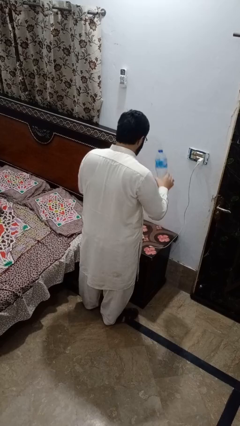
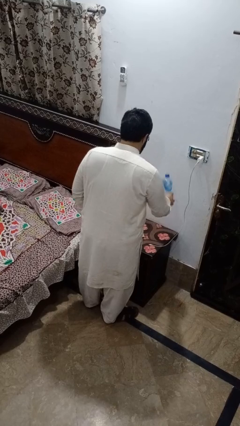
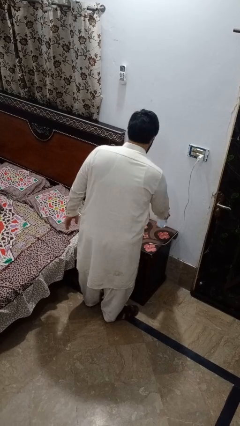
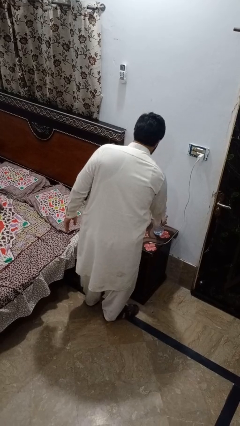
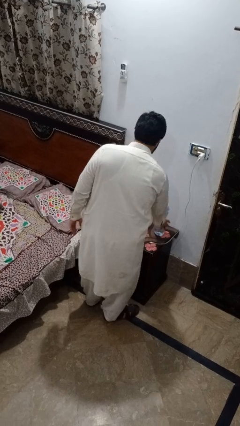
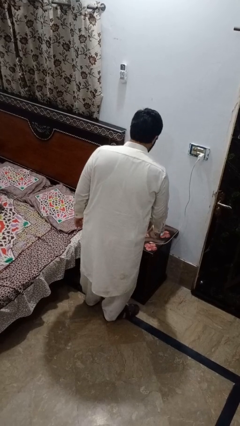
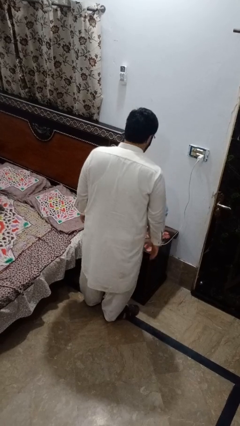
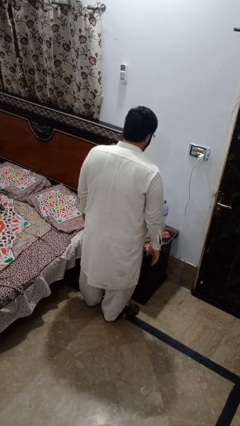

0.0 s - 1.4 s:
person puts down object on countertop

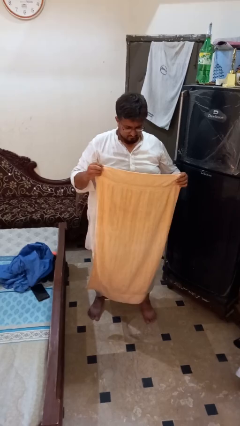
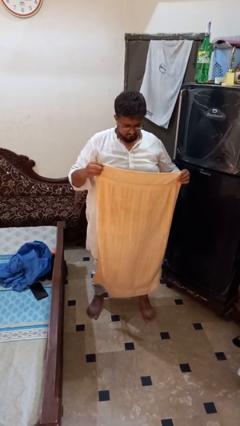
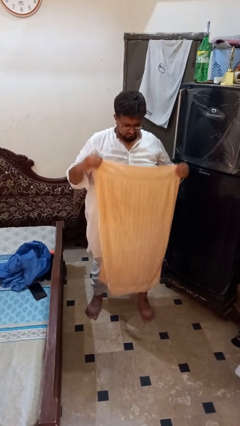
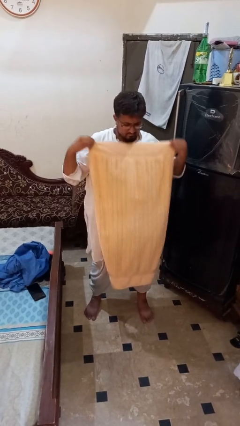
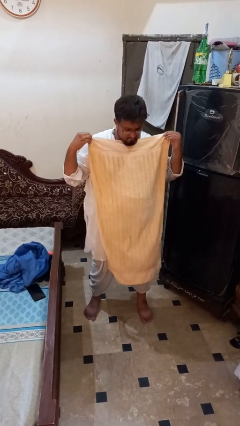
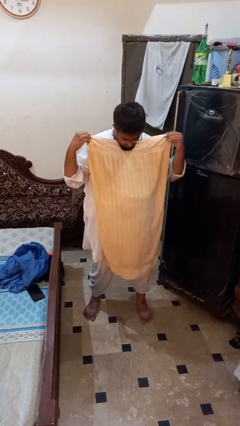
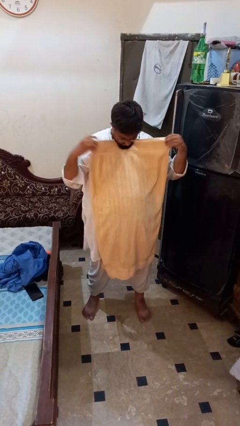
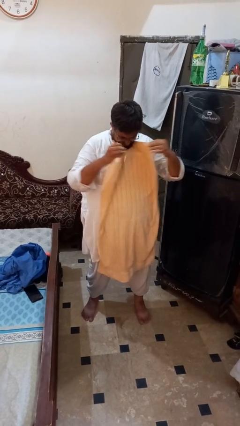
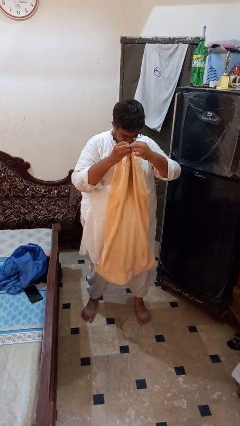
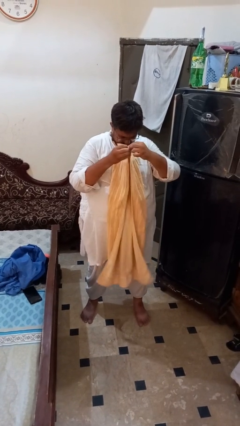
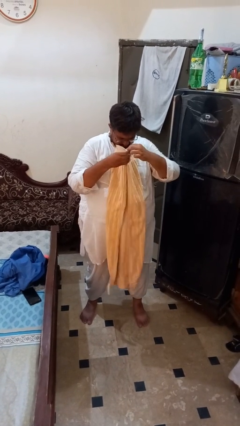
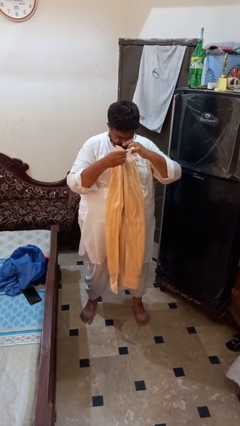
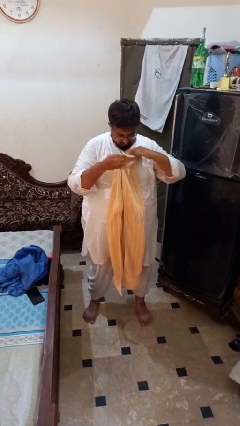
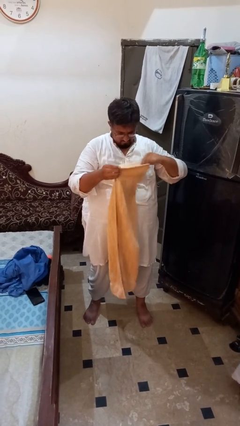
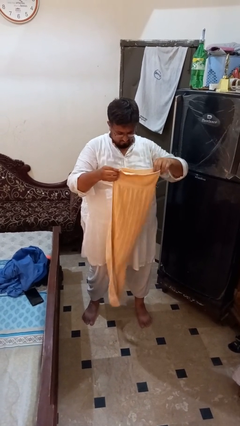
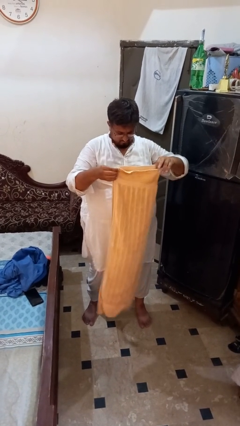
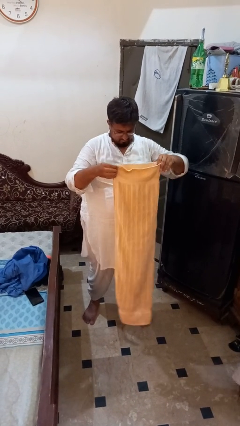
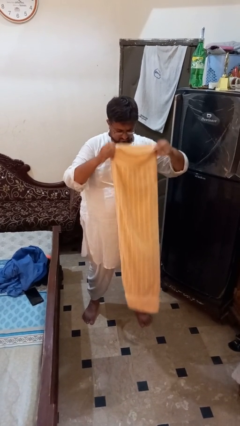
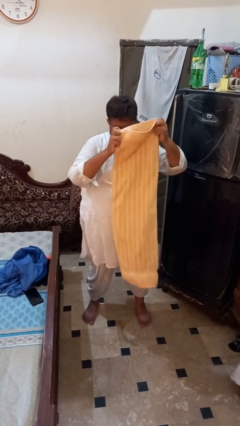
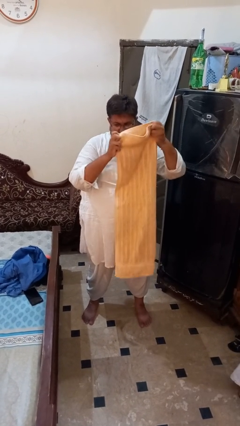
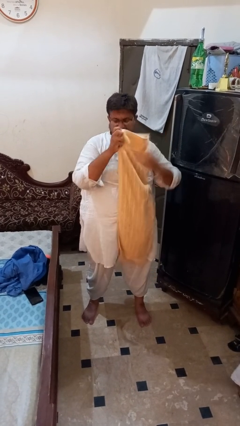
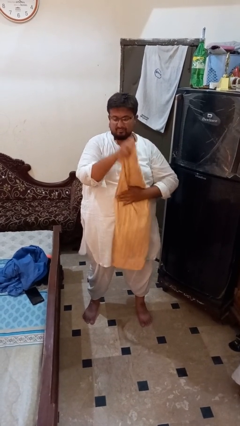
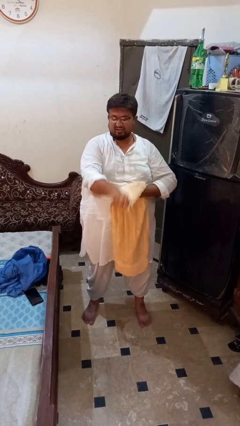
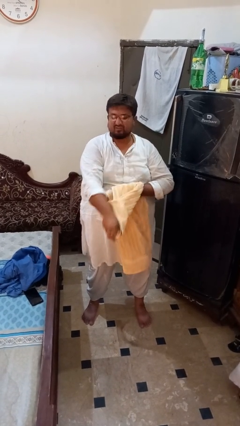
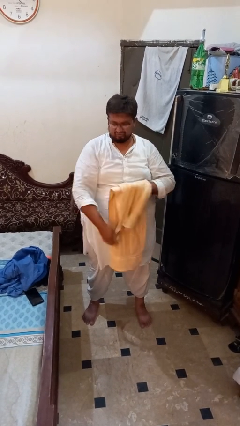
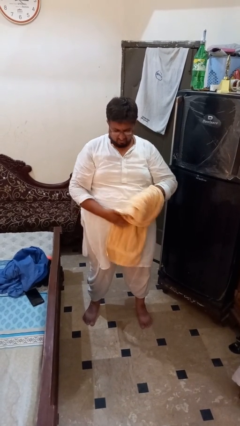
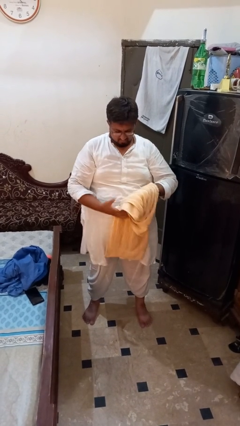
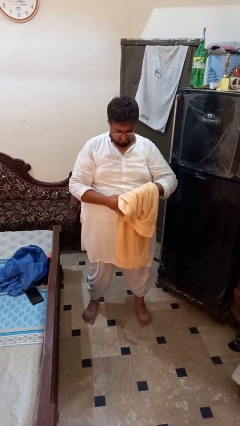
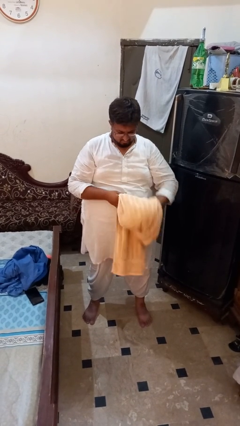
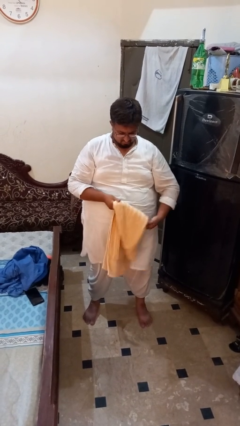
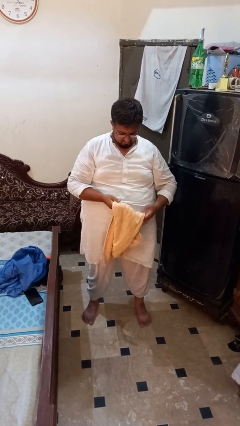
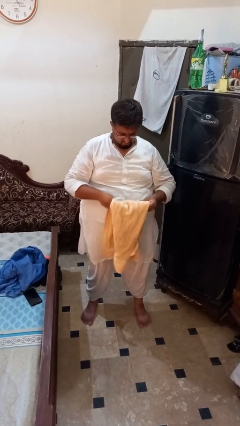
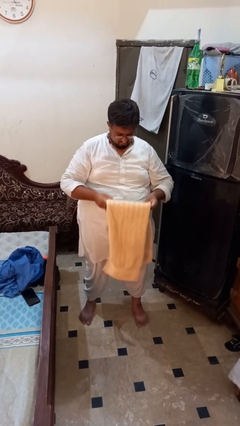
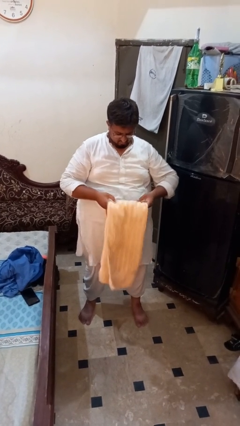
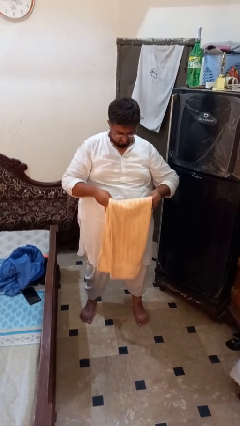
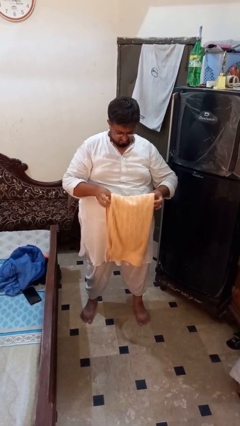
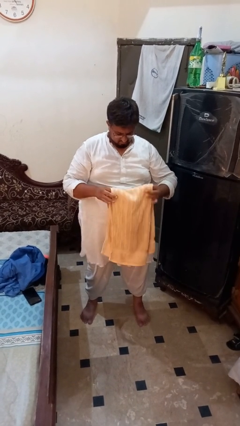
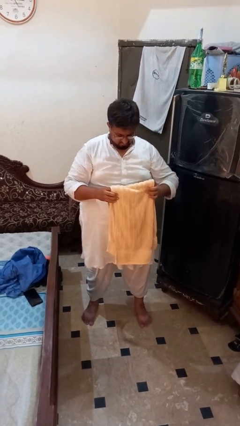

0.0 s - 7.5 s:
person folds towel

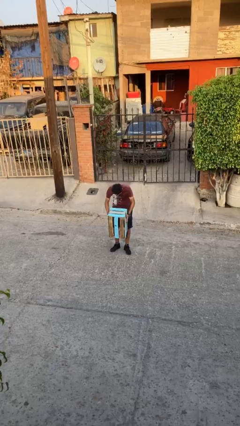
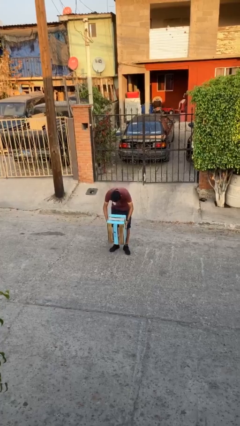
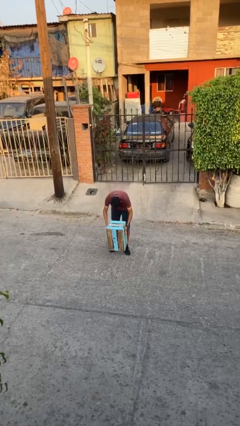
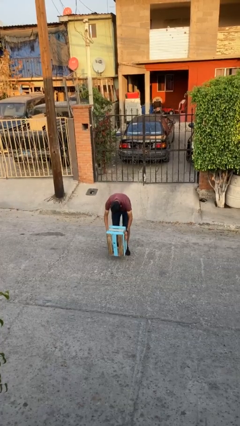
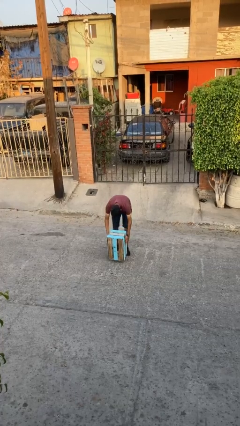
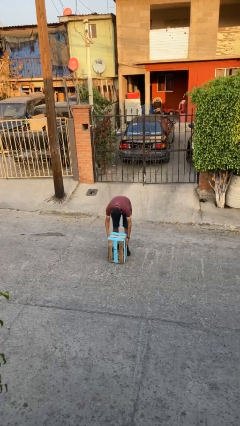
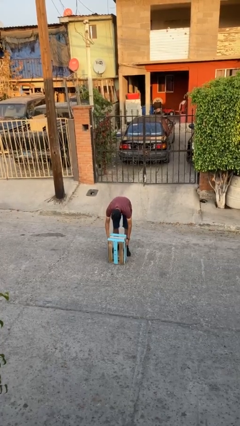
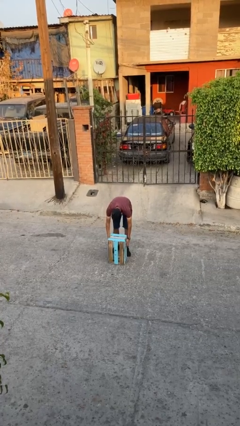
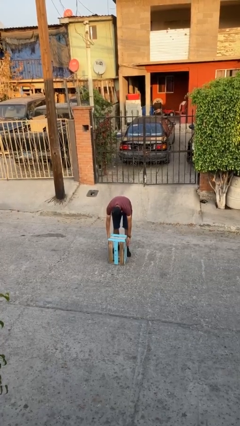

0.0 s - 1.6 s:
person puts down object on floor

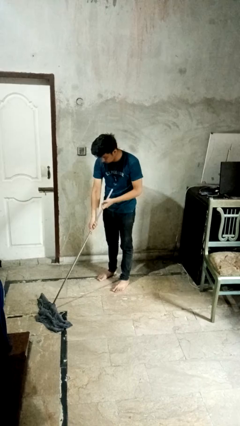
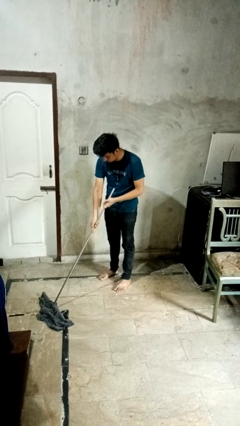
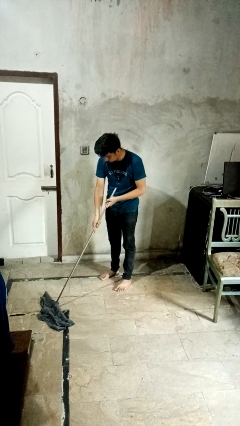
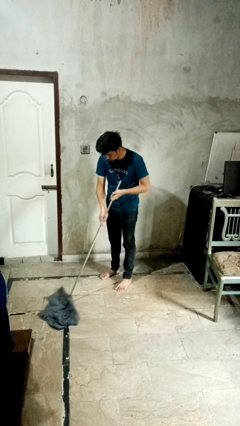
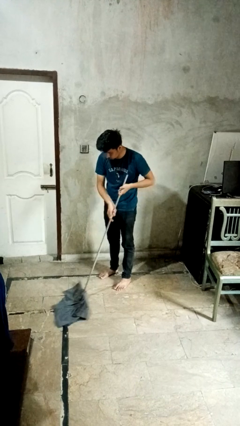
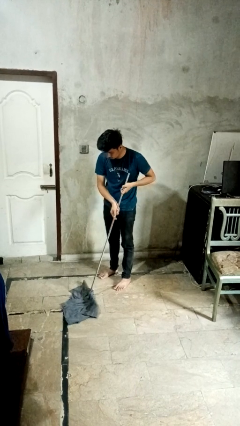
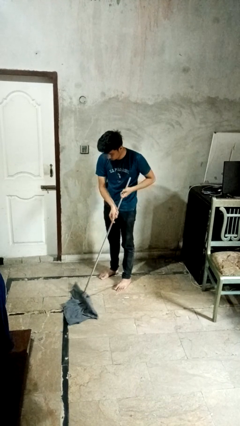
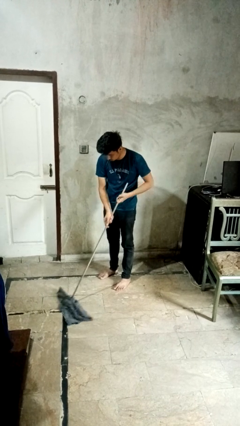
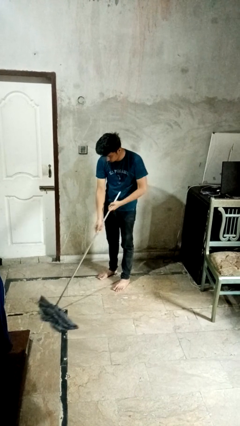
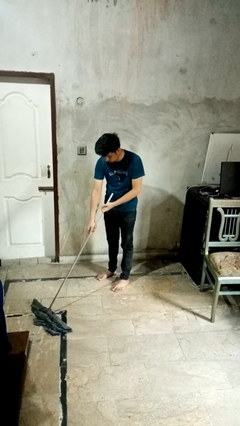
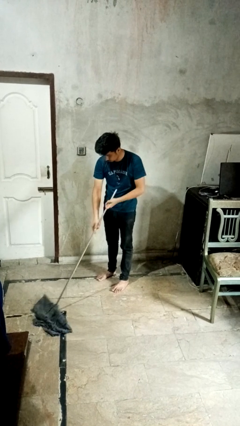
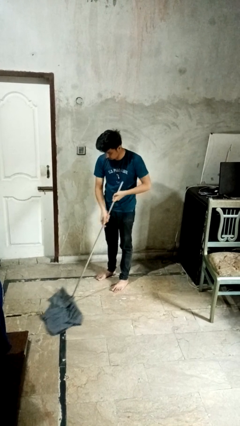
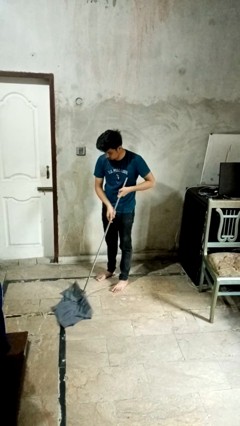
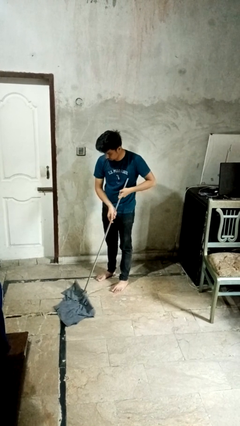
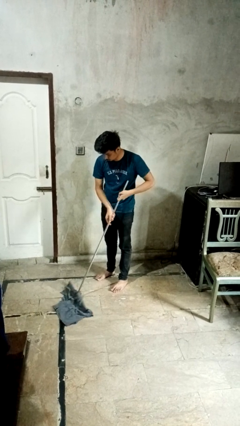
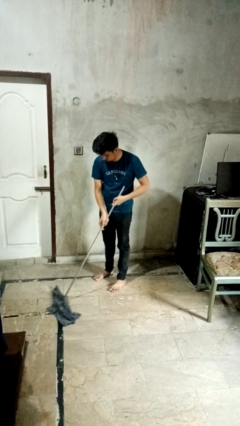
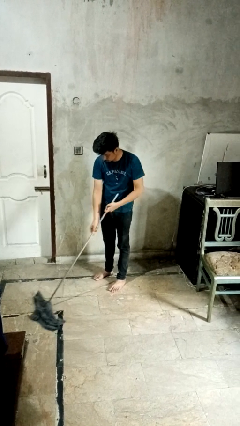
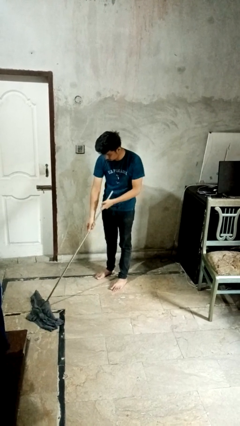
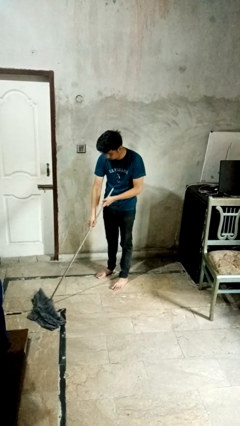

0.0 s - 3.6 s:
person mops

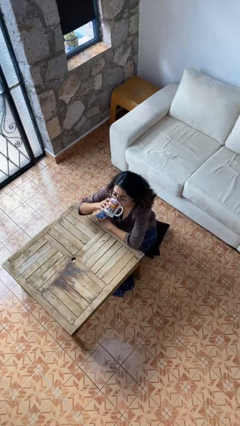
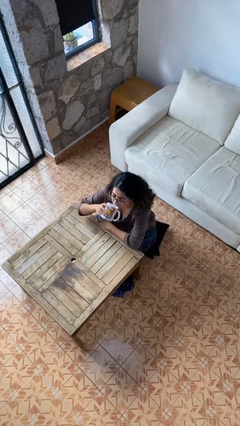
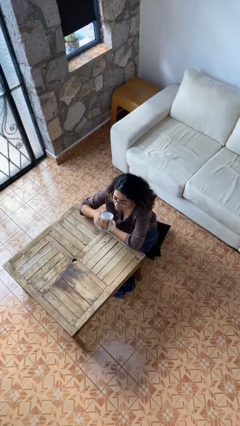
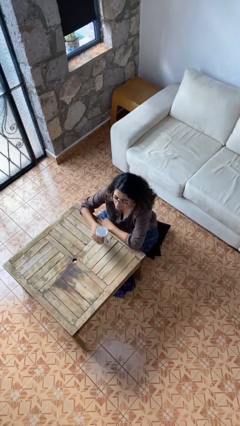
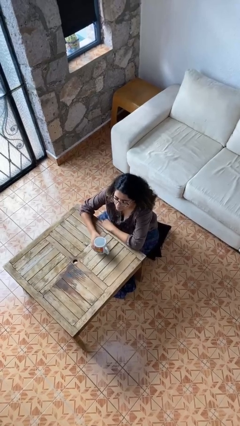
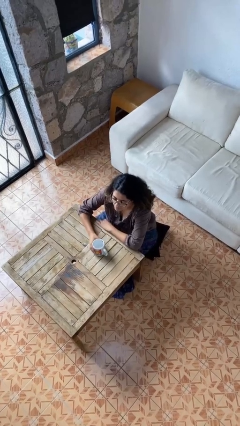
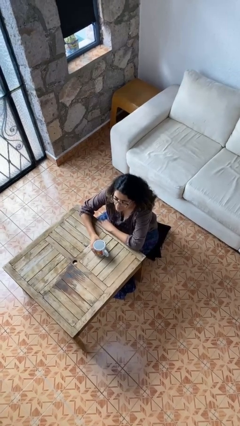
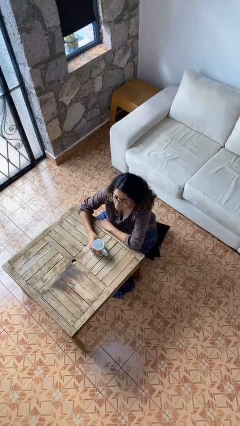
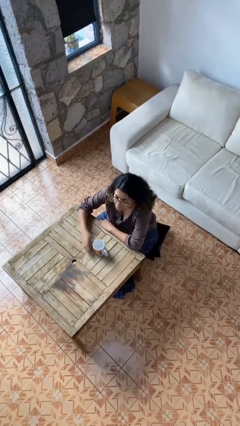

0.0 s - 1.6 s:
person puts down object on table

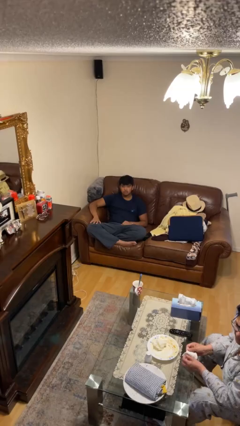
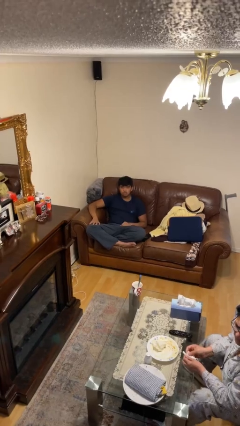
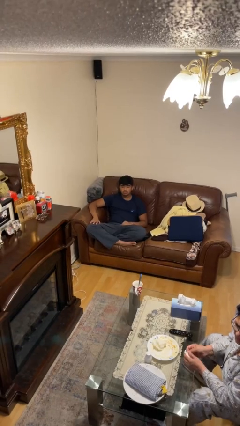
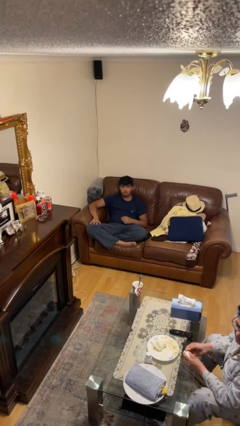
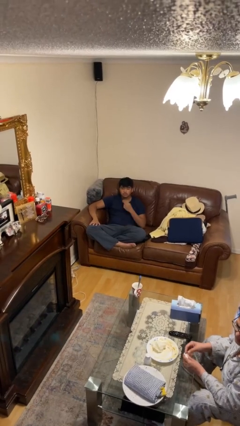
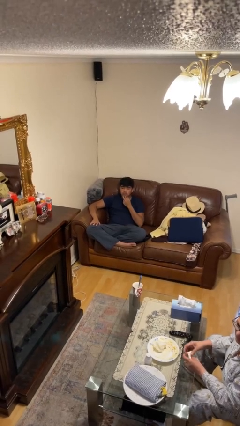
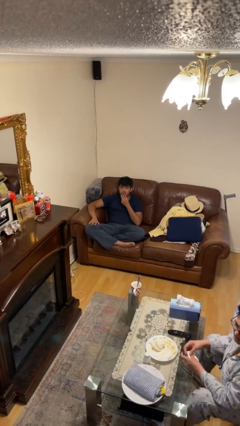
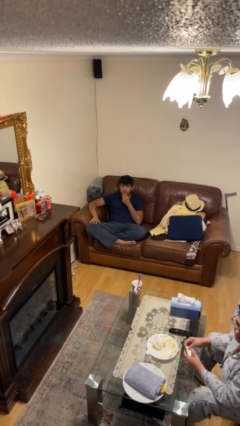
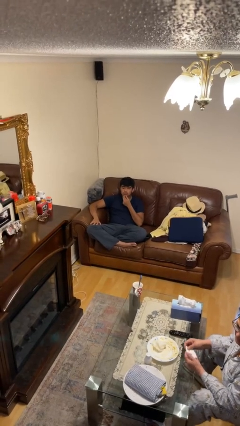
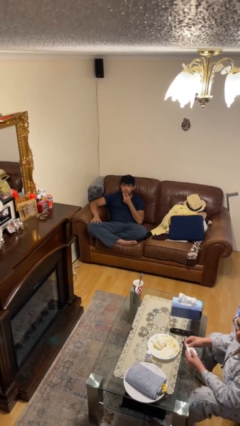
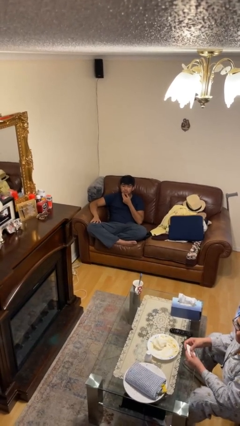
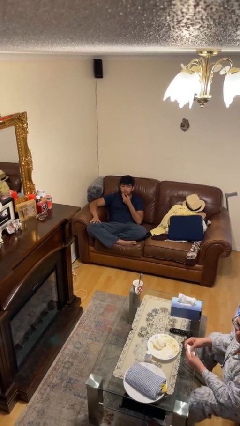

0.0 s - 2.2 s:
person strokes chin
